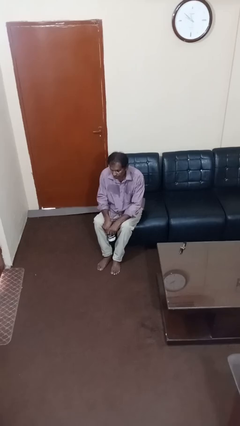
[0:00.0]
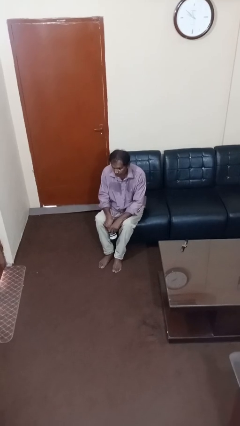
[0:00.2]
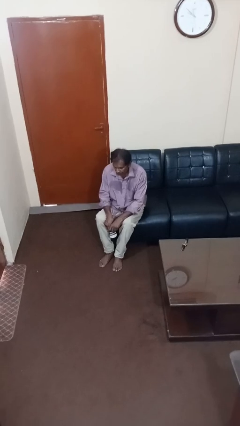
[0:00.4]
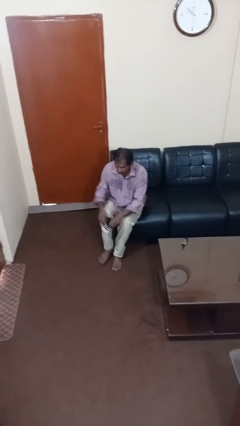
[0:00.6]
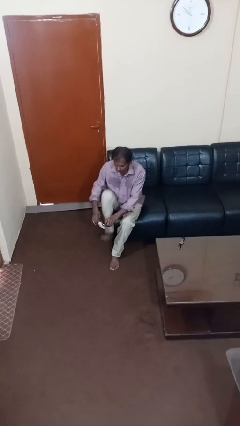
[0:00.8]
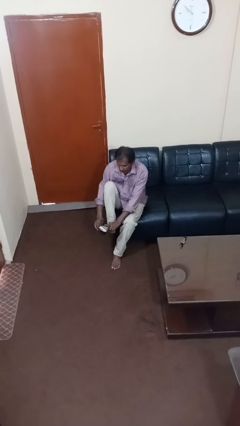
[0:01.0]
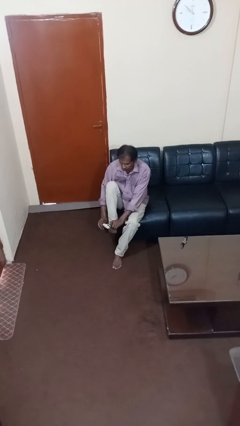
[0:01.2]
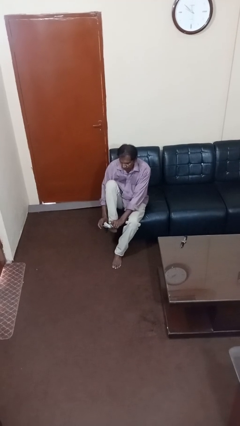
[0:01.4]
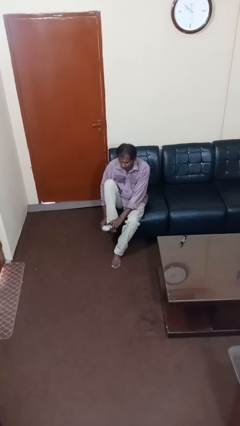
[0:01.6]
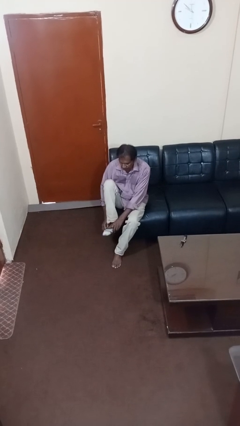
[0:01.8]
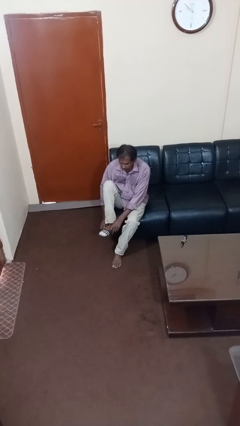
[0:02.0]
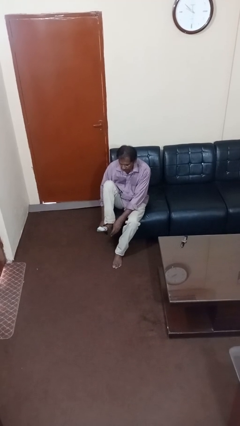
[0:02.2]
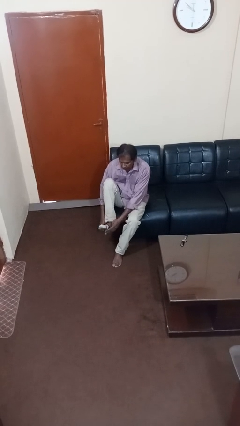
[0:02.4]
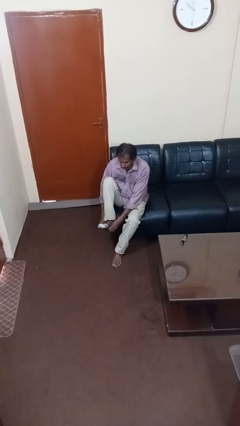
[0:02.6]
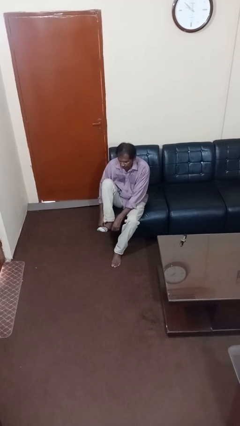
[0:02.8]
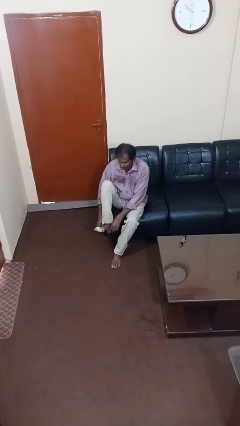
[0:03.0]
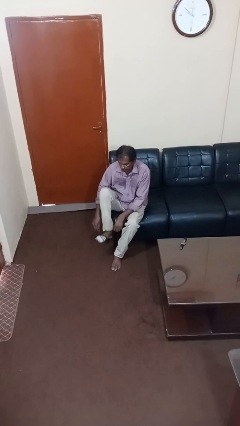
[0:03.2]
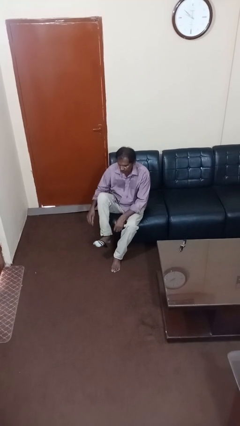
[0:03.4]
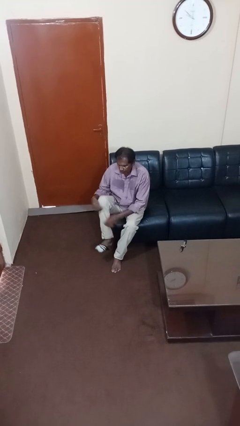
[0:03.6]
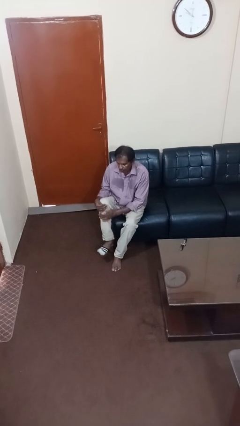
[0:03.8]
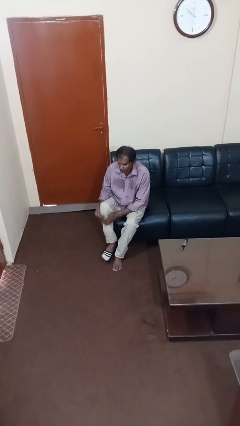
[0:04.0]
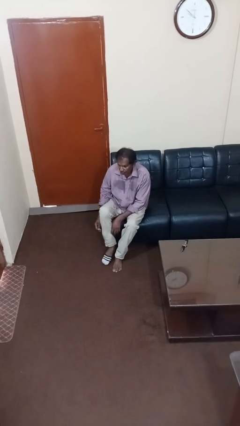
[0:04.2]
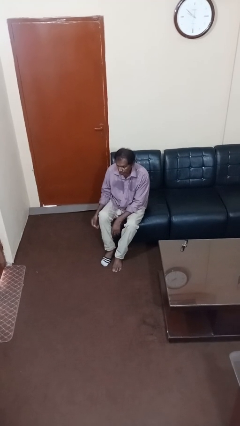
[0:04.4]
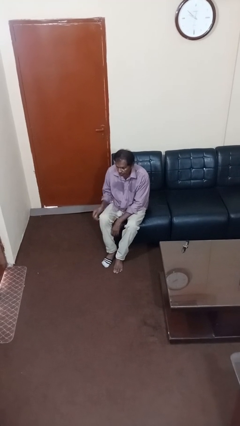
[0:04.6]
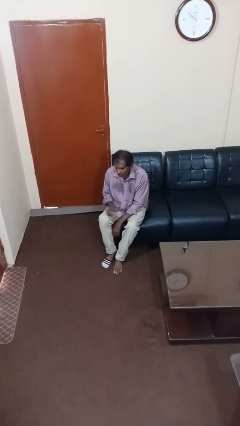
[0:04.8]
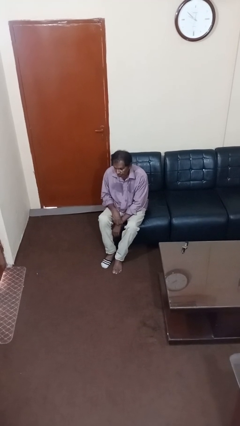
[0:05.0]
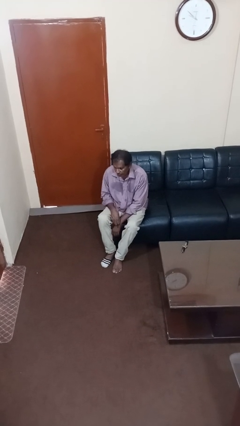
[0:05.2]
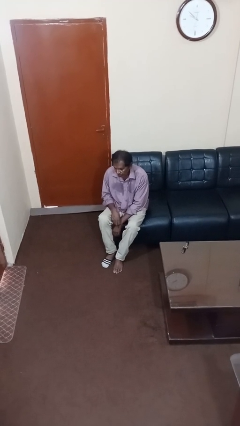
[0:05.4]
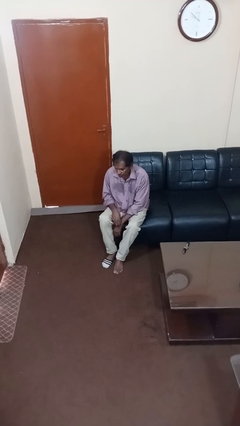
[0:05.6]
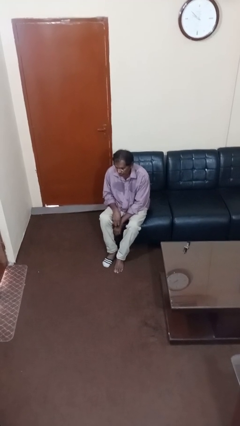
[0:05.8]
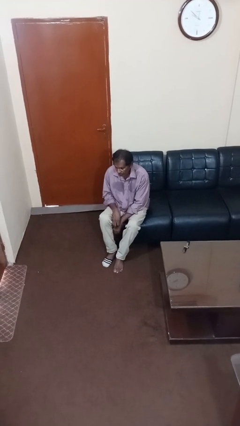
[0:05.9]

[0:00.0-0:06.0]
person puts on socks

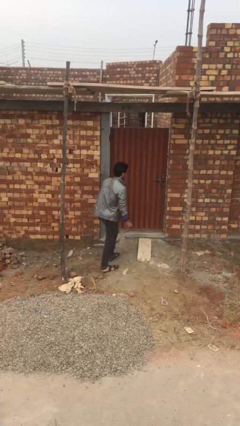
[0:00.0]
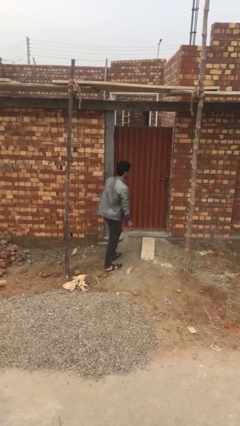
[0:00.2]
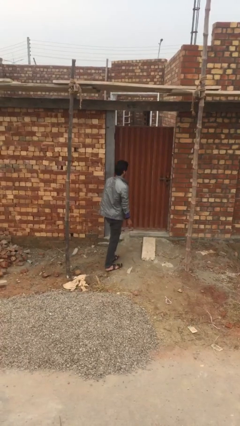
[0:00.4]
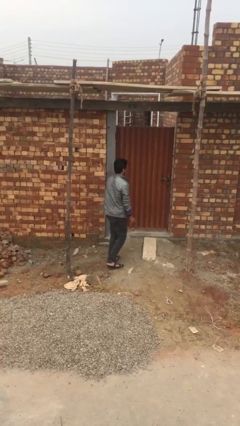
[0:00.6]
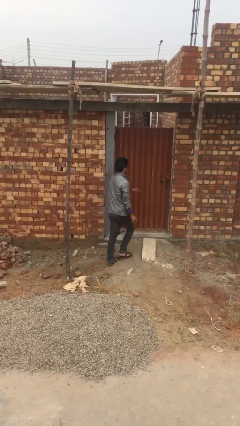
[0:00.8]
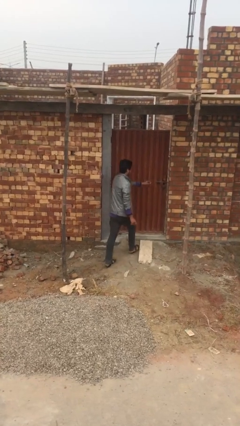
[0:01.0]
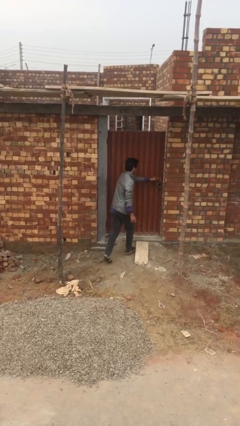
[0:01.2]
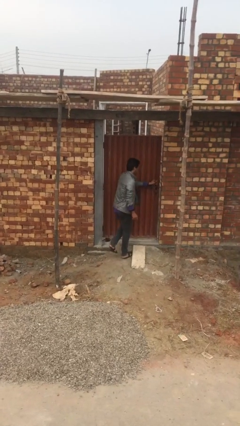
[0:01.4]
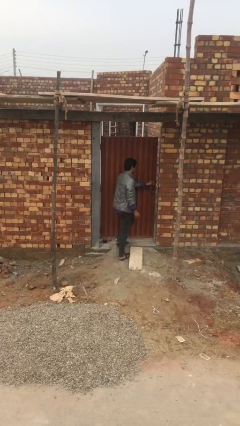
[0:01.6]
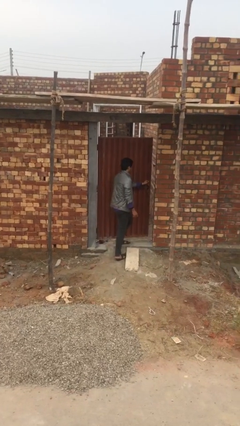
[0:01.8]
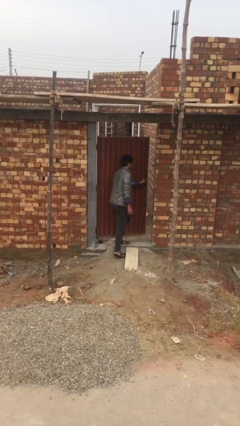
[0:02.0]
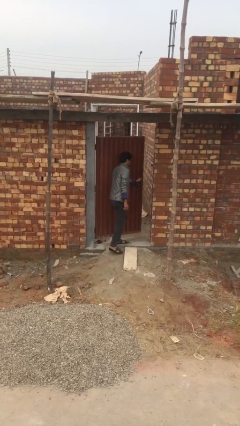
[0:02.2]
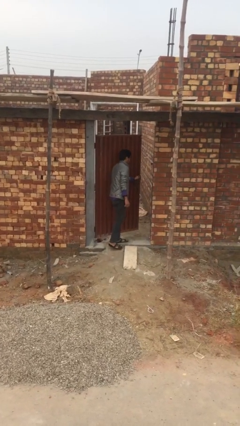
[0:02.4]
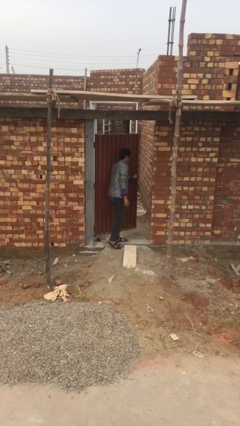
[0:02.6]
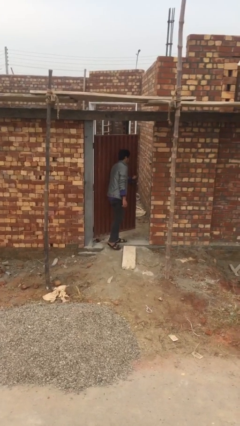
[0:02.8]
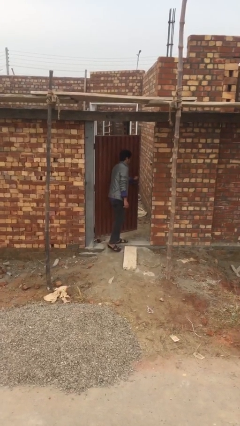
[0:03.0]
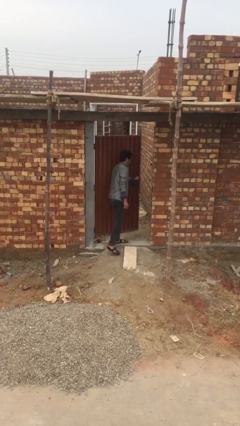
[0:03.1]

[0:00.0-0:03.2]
person opens facility door

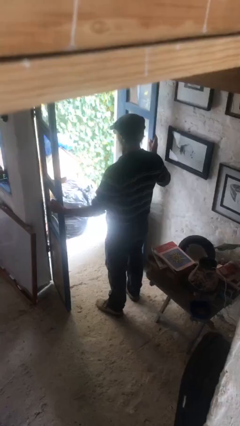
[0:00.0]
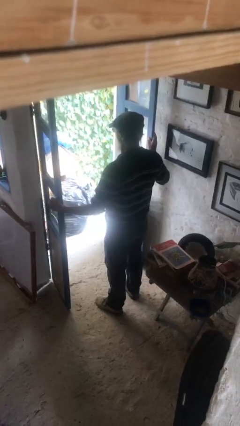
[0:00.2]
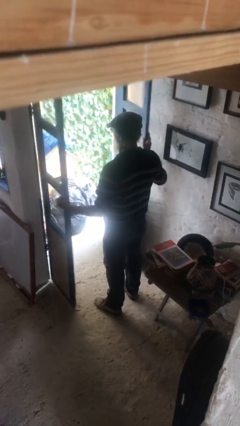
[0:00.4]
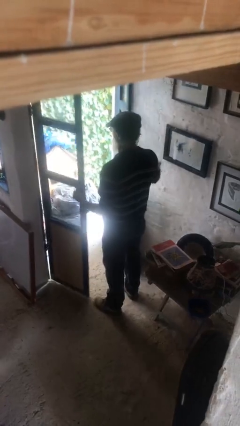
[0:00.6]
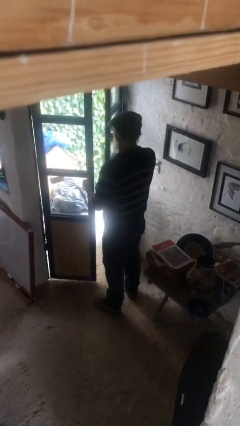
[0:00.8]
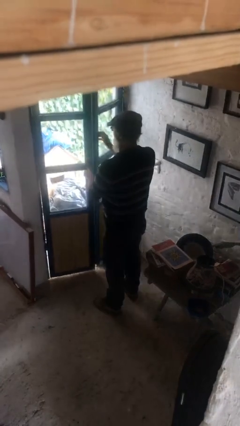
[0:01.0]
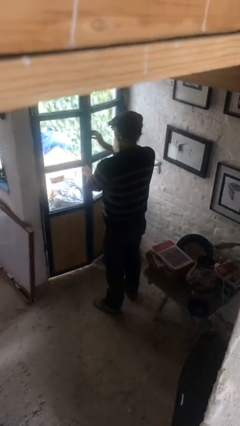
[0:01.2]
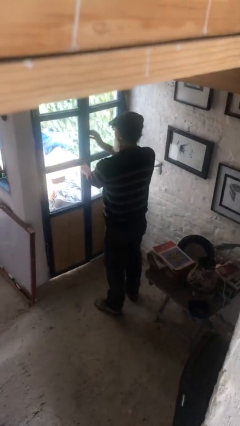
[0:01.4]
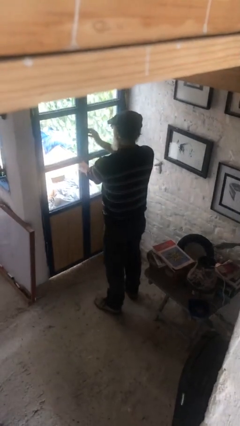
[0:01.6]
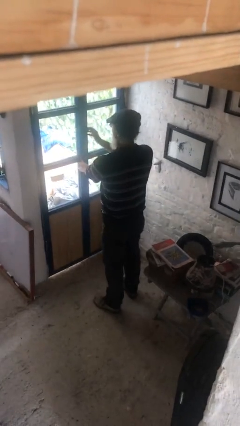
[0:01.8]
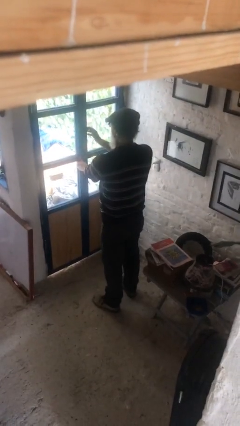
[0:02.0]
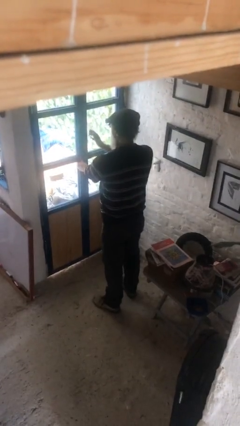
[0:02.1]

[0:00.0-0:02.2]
person closes facility door

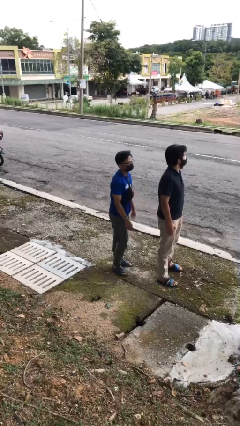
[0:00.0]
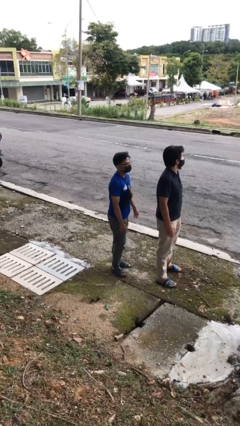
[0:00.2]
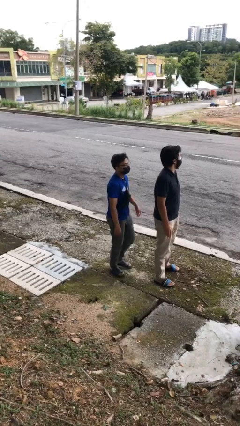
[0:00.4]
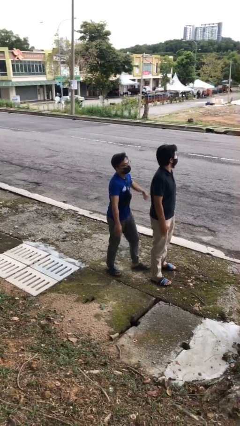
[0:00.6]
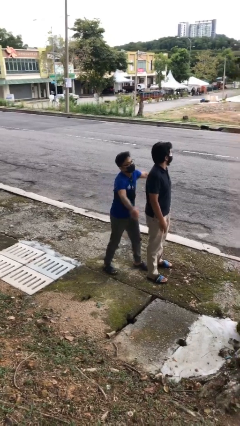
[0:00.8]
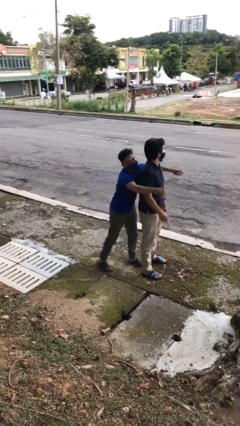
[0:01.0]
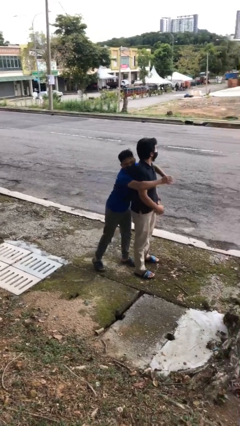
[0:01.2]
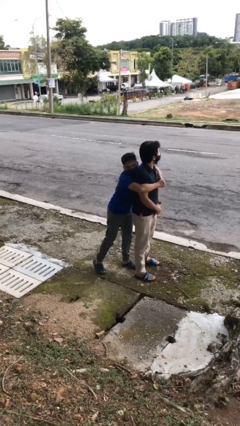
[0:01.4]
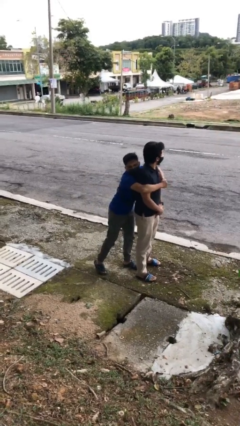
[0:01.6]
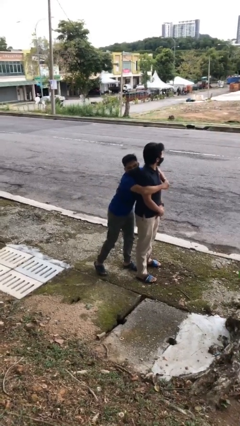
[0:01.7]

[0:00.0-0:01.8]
person hugs person from behind

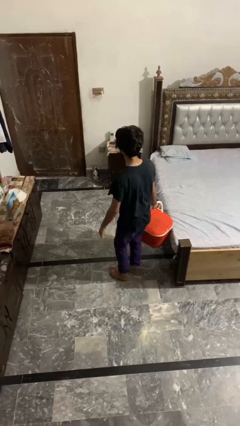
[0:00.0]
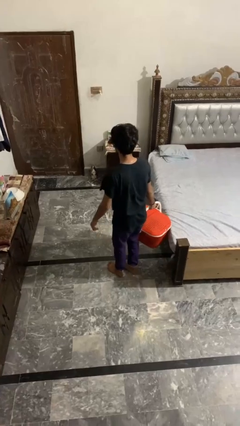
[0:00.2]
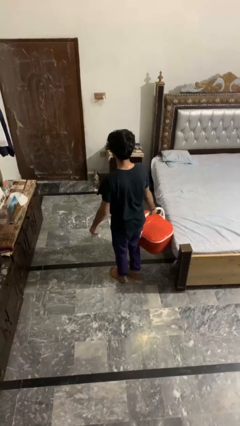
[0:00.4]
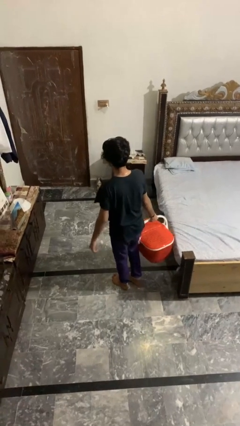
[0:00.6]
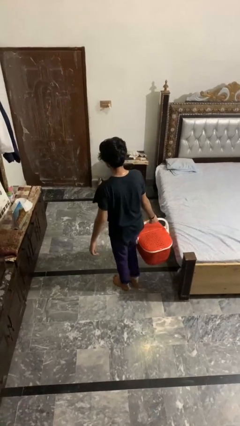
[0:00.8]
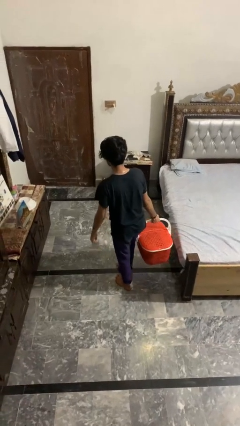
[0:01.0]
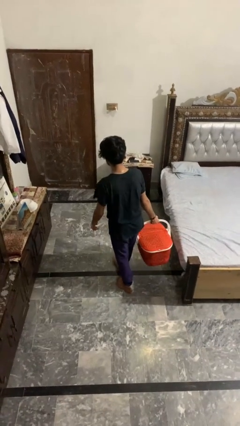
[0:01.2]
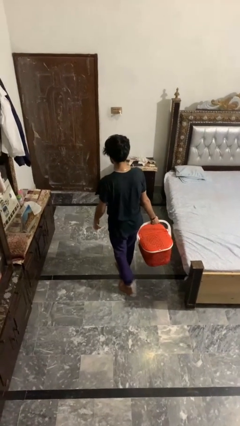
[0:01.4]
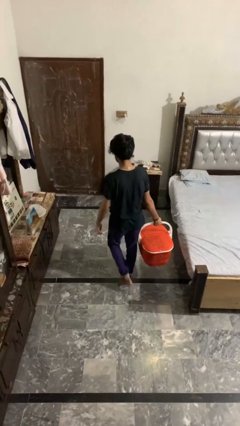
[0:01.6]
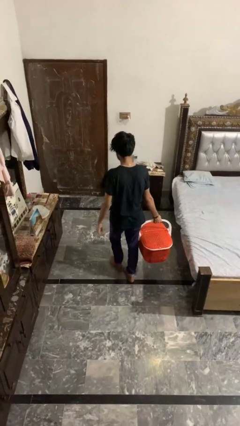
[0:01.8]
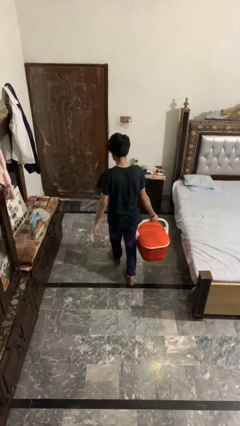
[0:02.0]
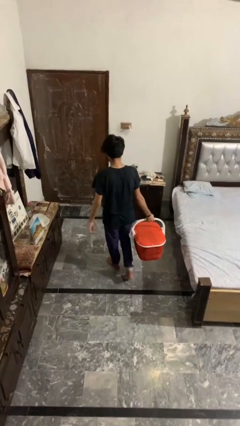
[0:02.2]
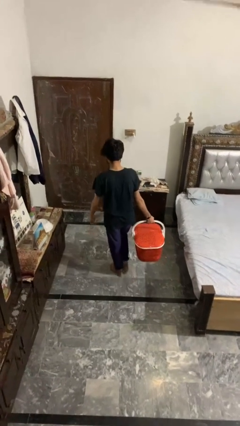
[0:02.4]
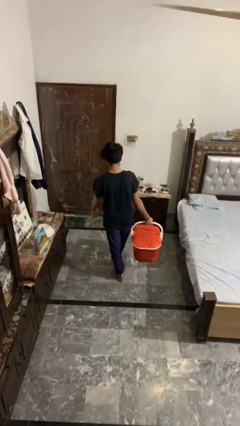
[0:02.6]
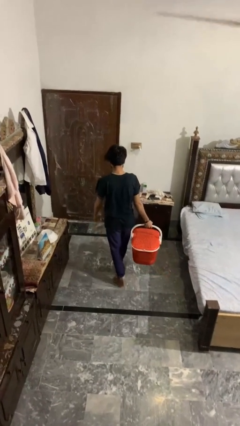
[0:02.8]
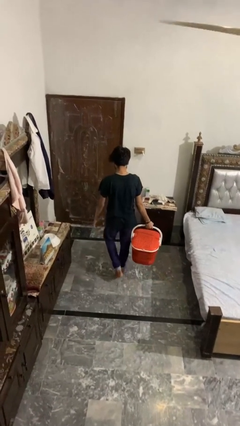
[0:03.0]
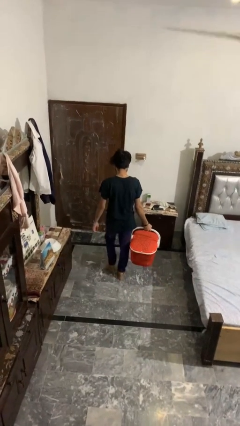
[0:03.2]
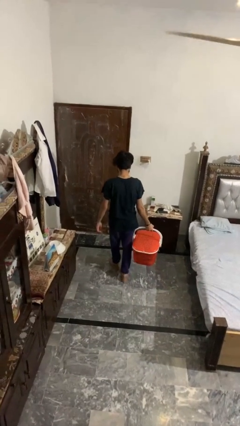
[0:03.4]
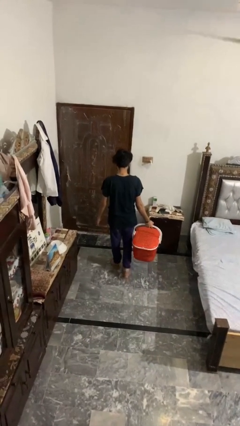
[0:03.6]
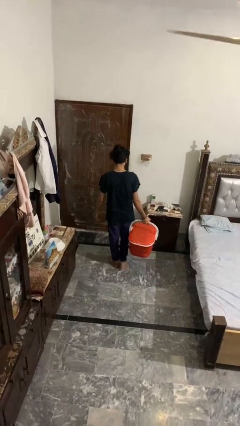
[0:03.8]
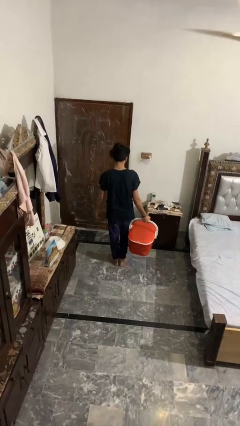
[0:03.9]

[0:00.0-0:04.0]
person carries laundry basket

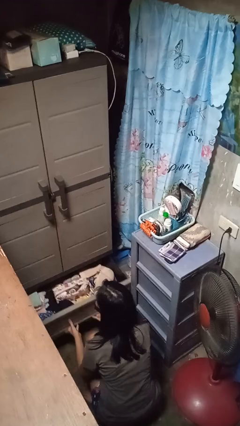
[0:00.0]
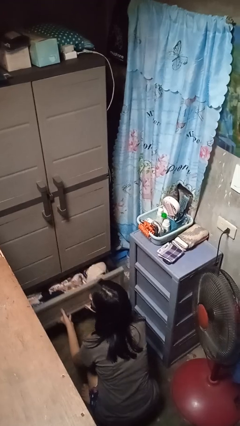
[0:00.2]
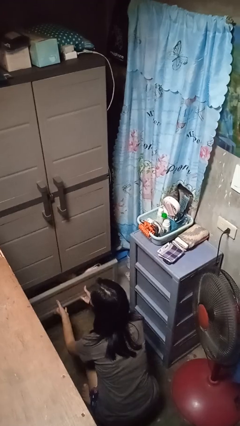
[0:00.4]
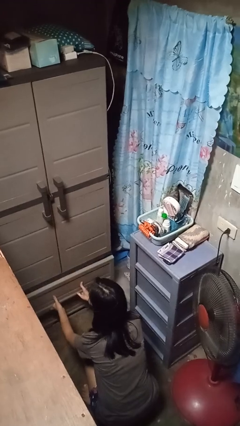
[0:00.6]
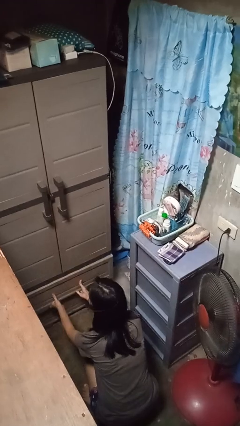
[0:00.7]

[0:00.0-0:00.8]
person closes dresser drawer
